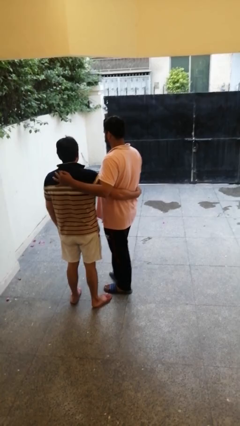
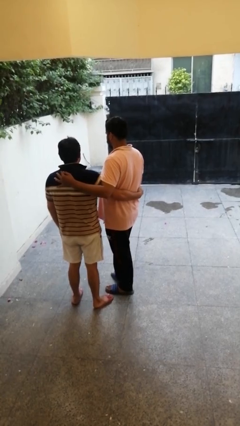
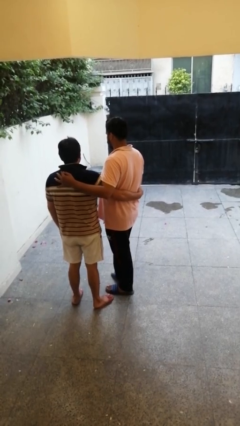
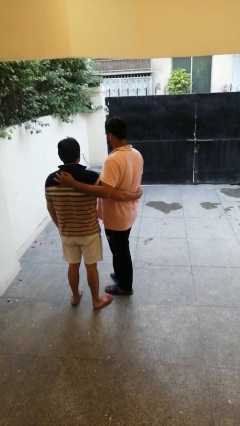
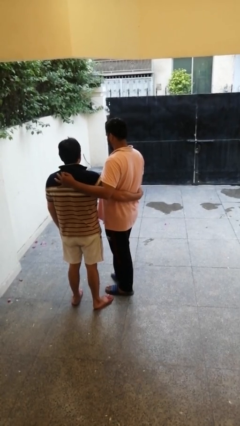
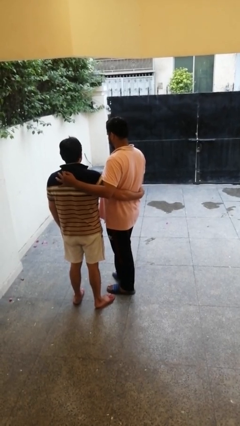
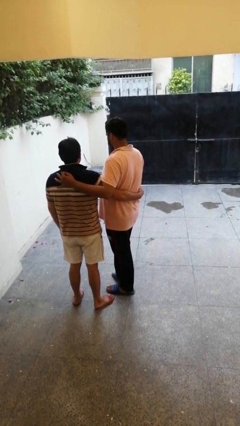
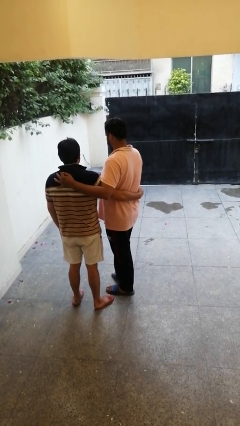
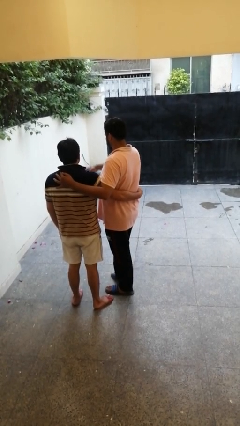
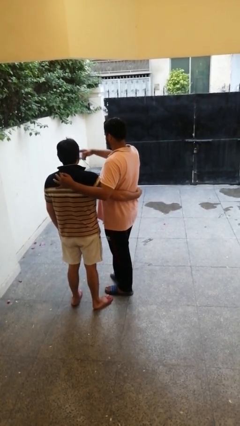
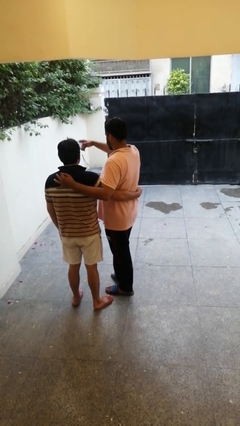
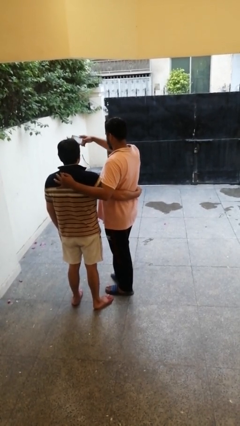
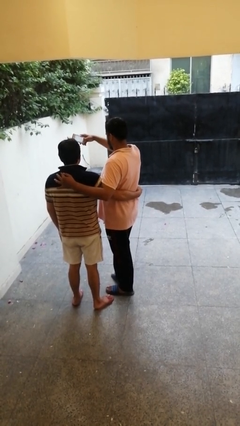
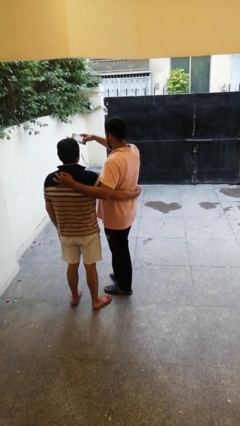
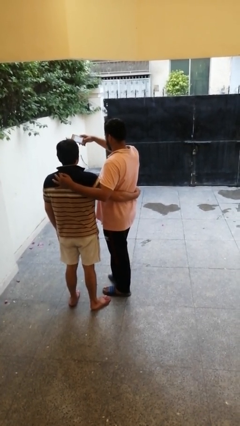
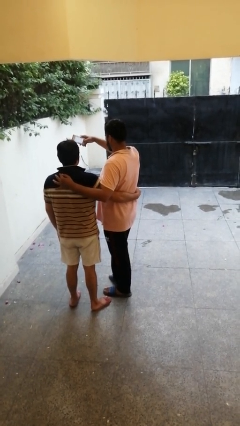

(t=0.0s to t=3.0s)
person takes selfie with person

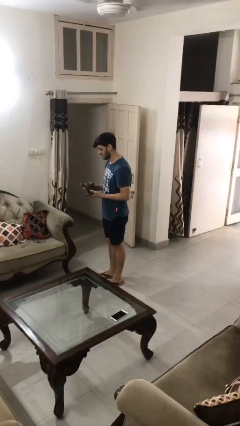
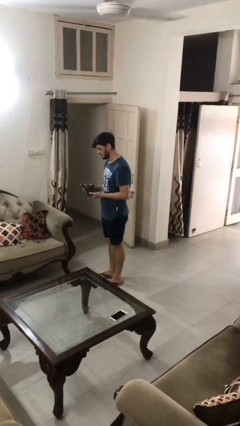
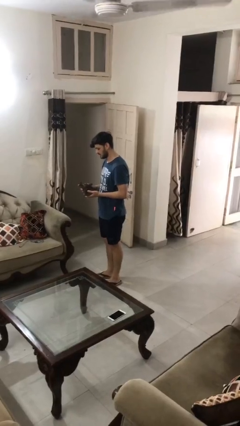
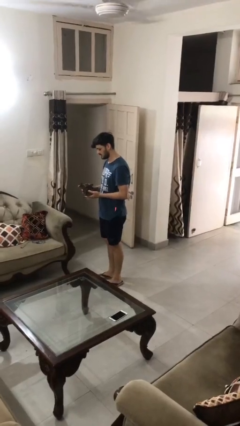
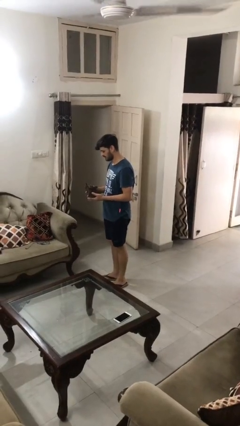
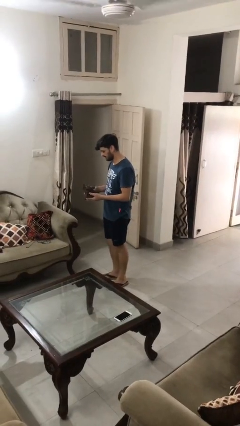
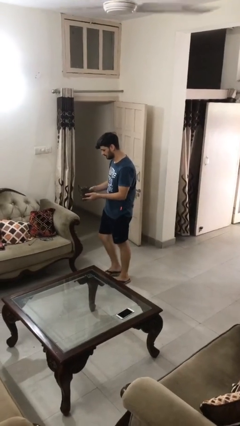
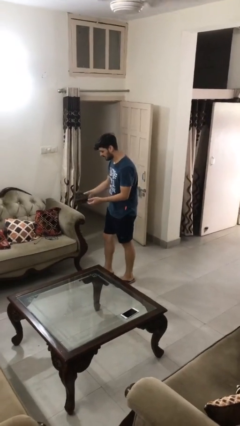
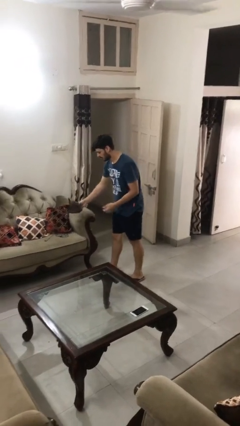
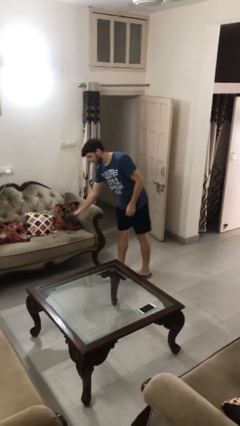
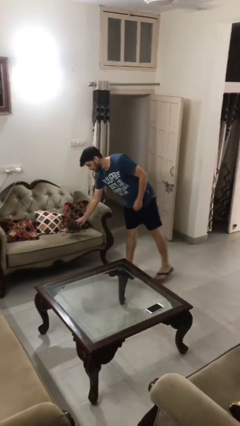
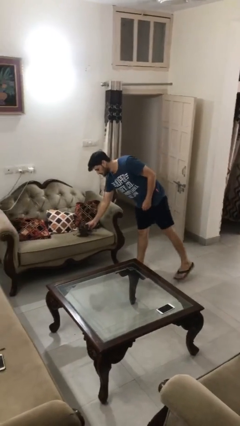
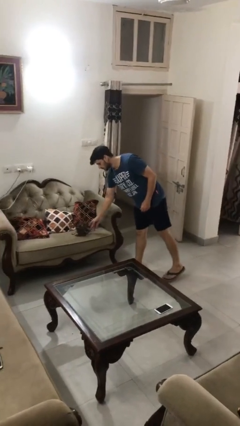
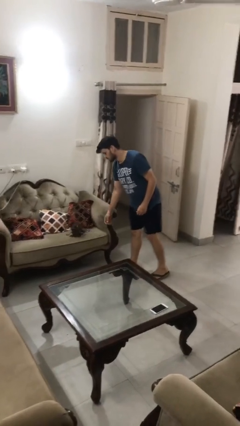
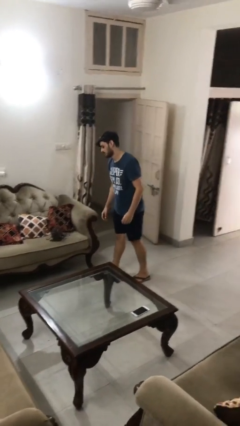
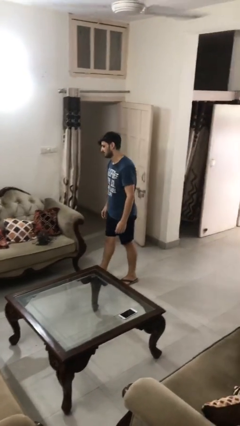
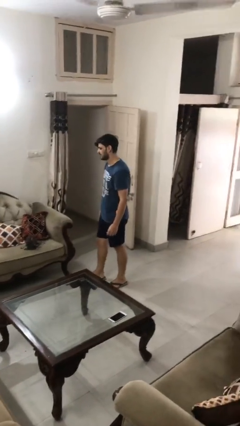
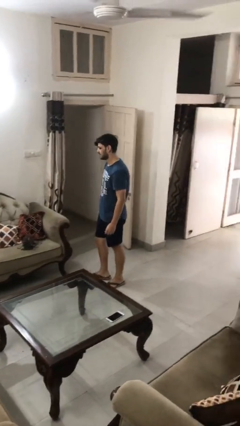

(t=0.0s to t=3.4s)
person puts down object on couch

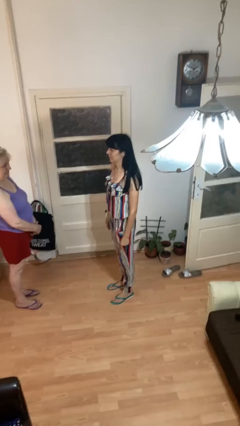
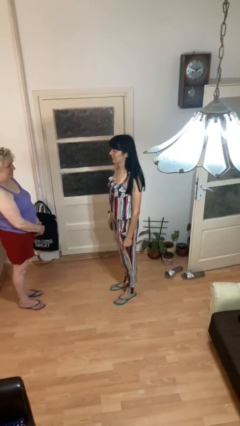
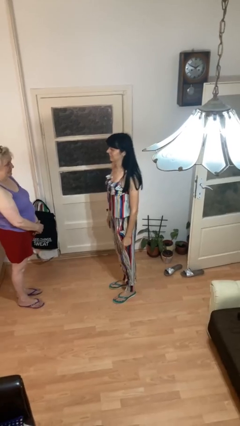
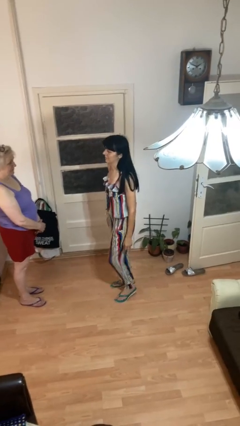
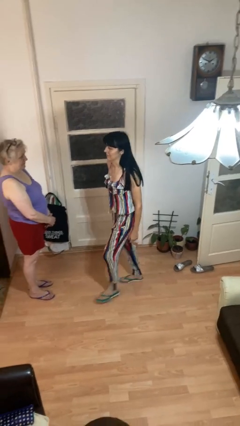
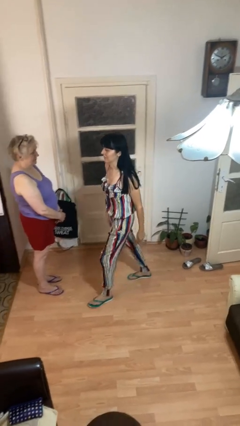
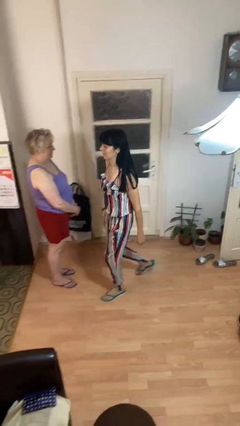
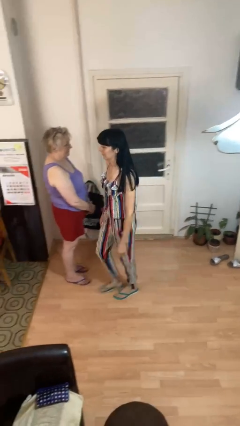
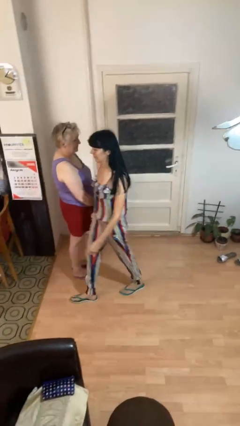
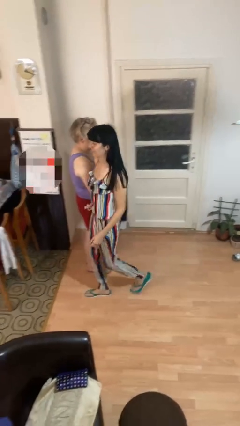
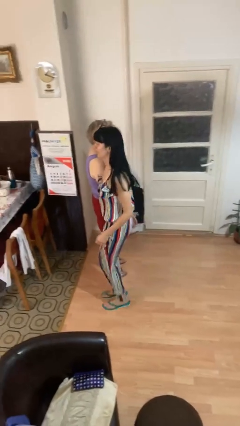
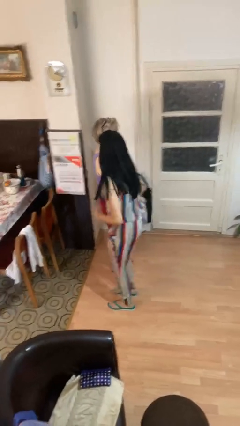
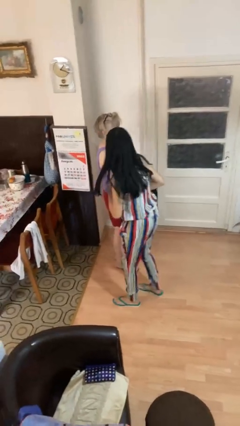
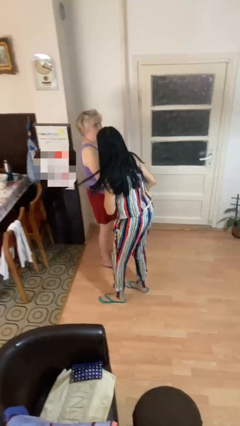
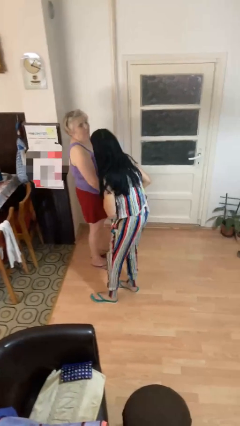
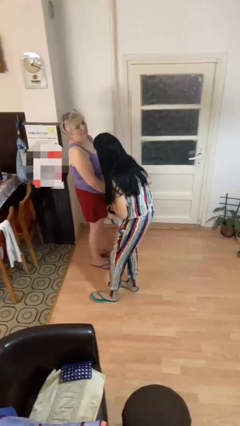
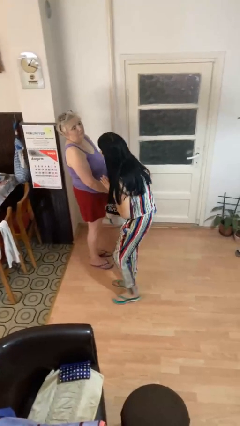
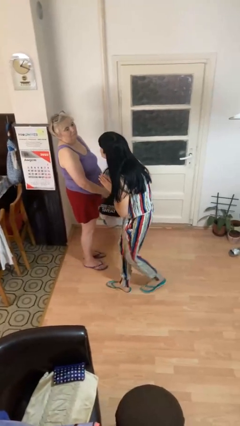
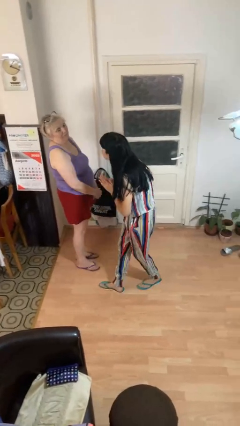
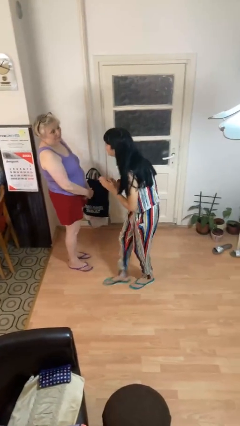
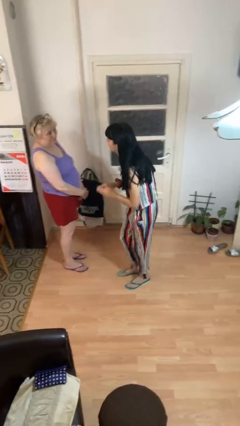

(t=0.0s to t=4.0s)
person bumps into person

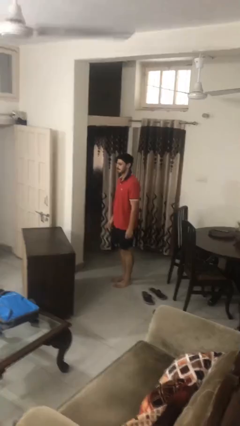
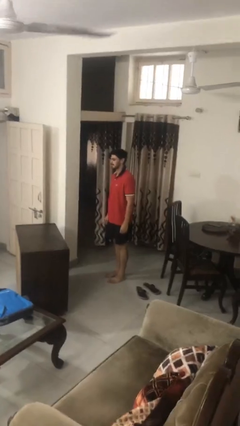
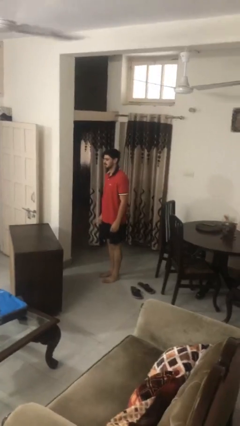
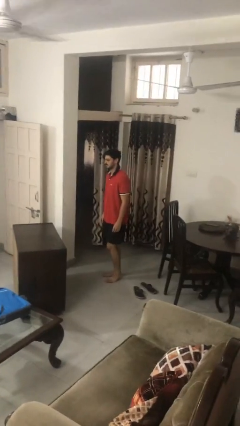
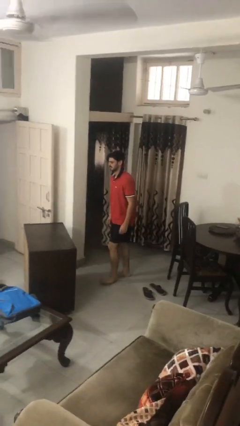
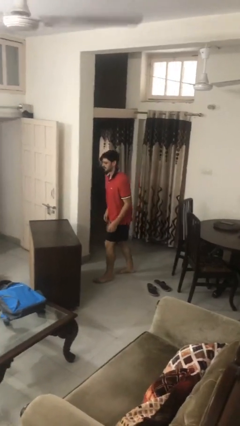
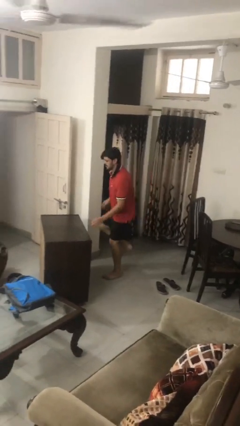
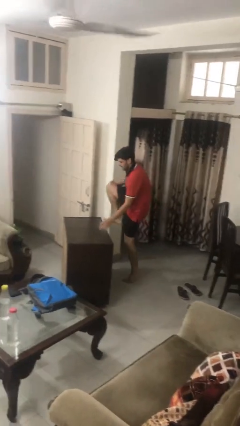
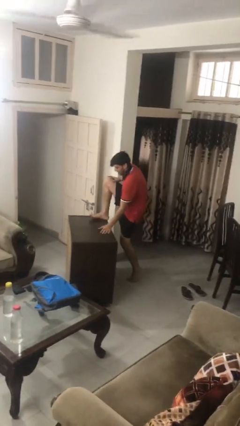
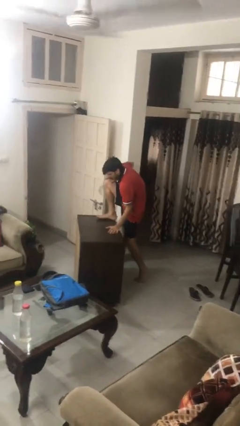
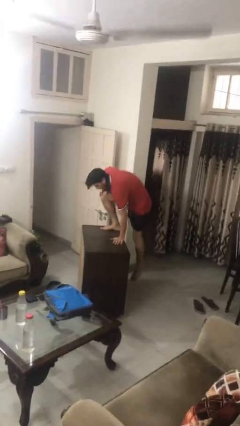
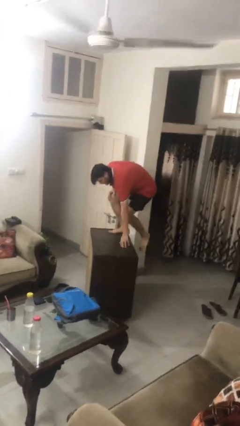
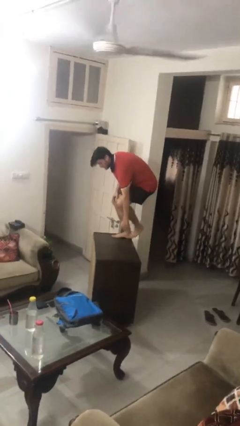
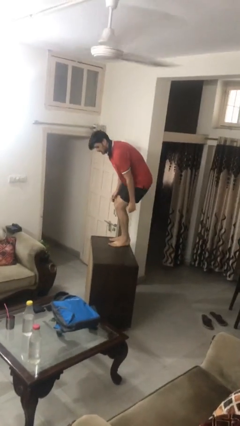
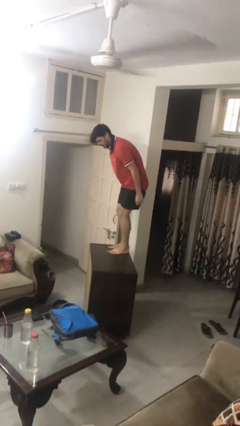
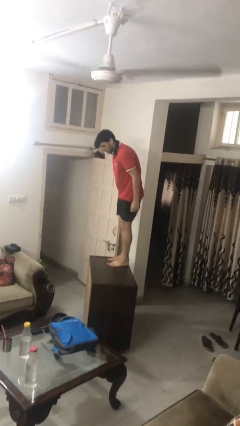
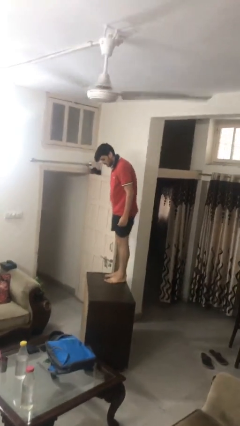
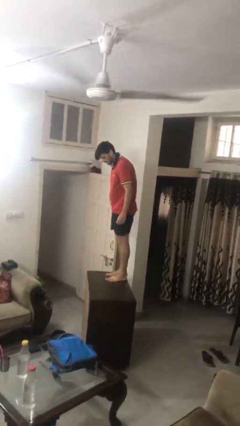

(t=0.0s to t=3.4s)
person climbs on table

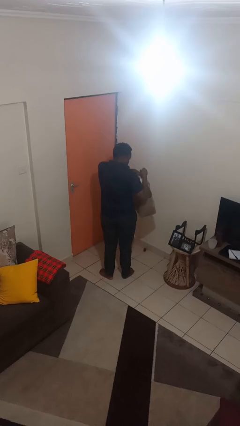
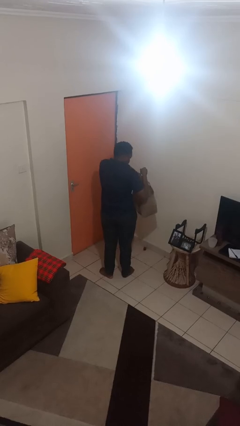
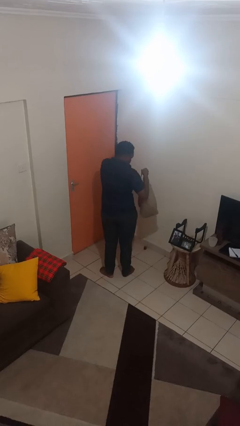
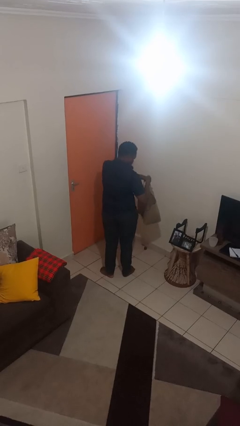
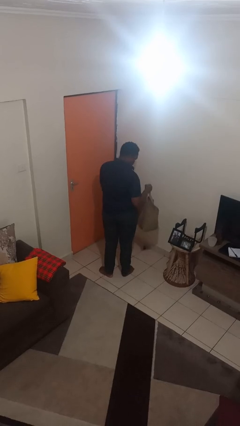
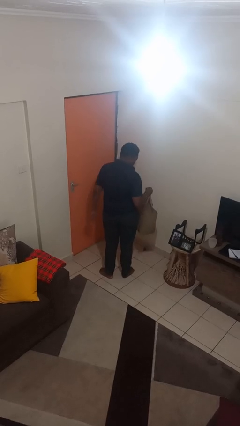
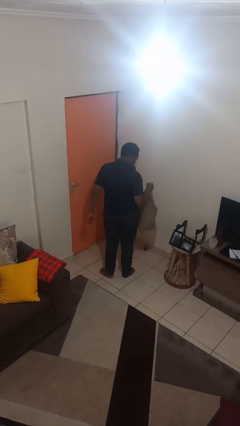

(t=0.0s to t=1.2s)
person puts object into bag

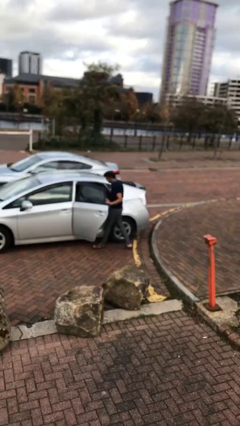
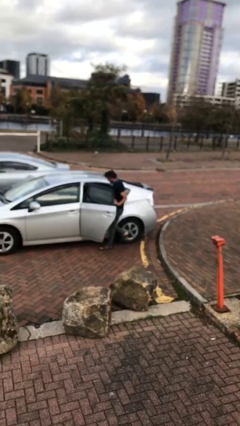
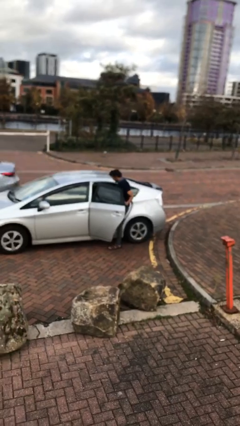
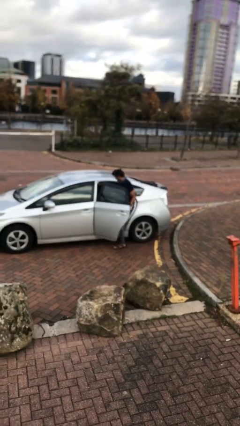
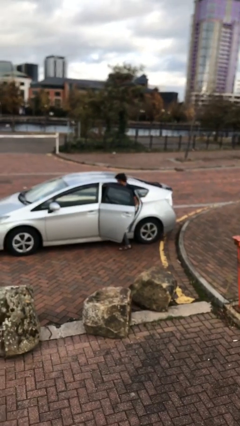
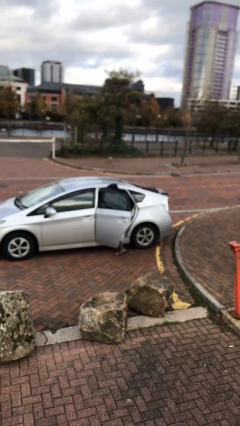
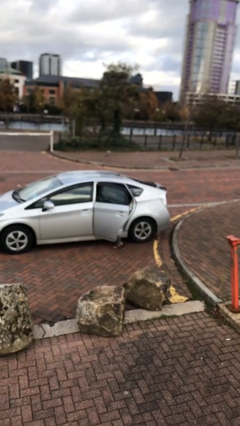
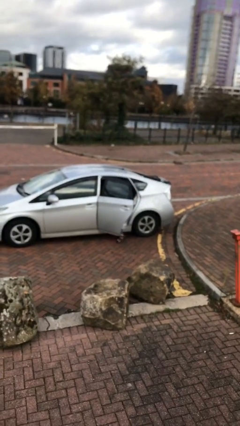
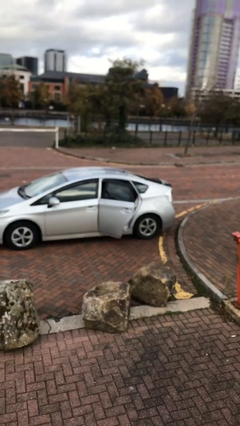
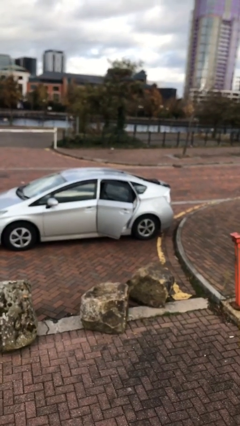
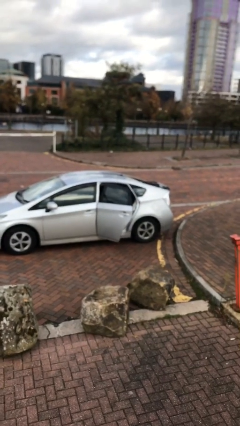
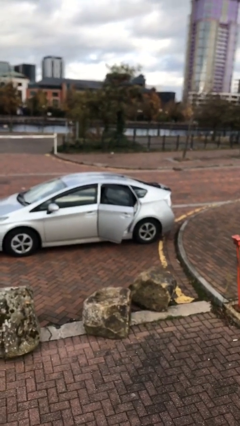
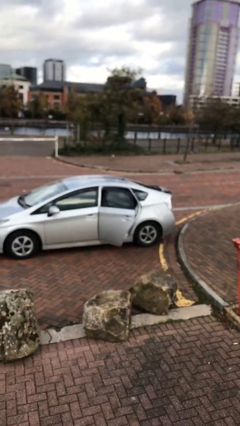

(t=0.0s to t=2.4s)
person enters car
